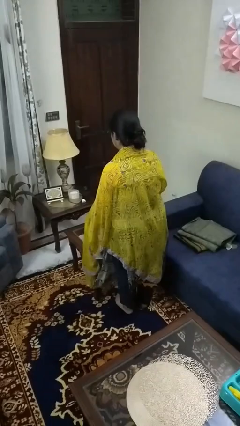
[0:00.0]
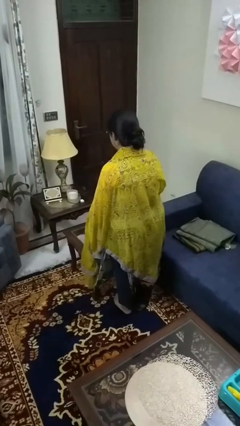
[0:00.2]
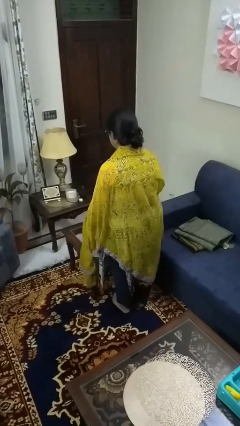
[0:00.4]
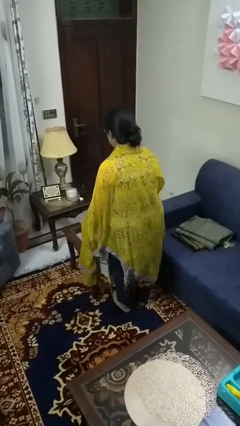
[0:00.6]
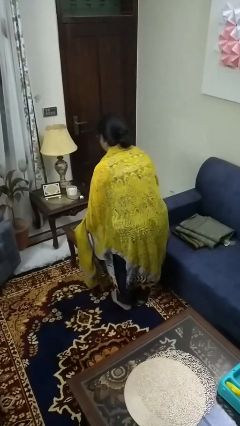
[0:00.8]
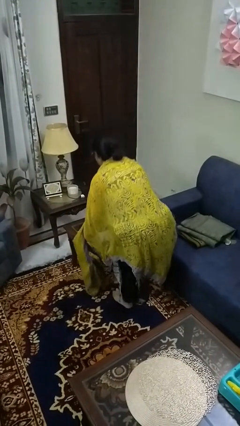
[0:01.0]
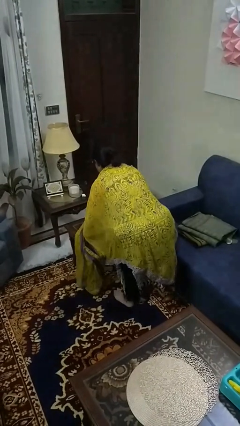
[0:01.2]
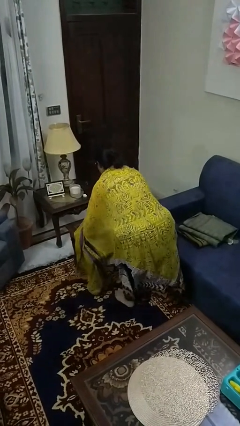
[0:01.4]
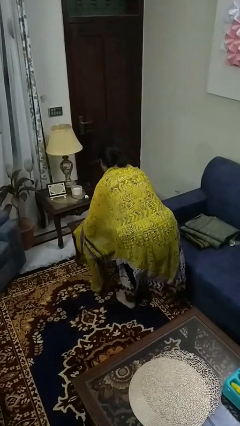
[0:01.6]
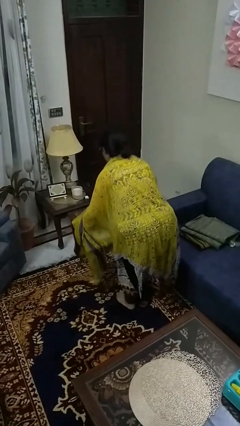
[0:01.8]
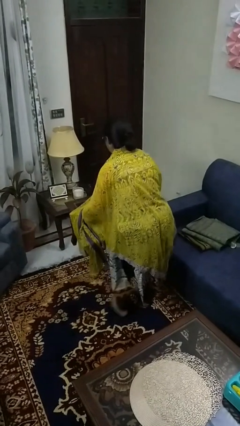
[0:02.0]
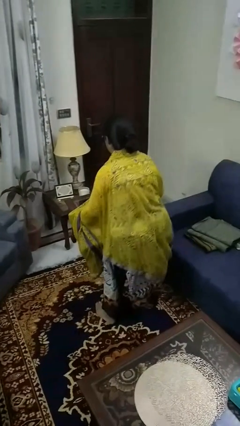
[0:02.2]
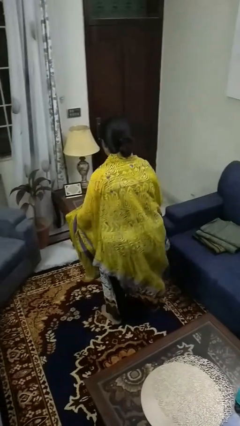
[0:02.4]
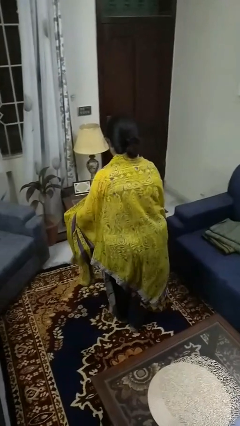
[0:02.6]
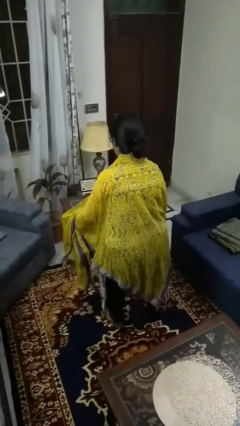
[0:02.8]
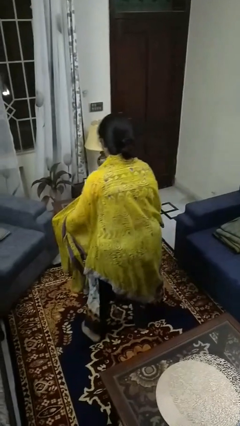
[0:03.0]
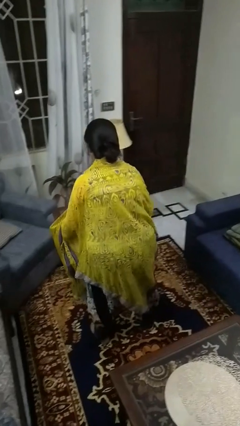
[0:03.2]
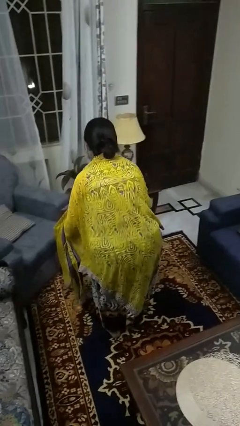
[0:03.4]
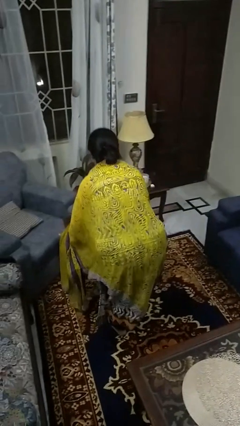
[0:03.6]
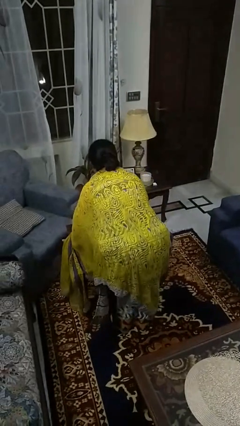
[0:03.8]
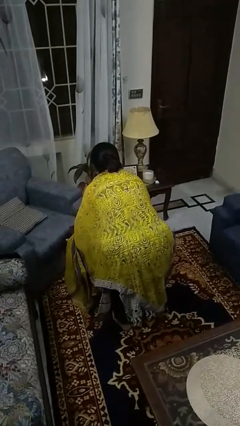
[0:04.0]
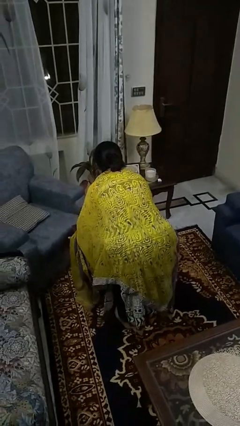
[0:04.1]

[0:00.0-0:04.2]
person carries furniture

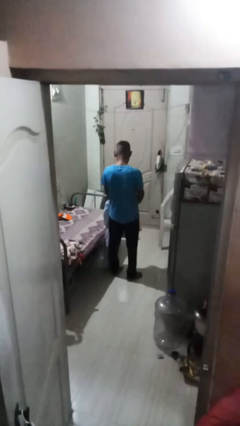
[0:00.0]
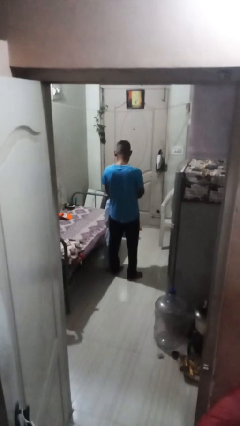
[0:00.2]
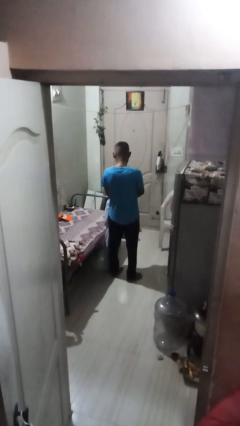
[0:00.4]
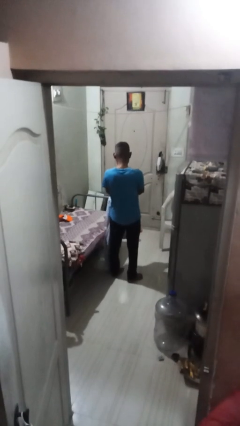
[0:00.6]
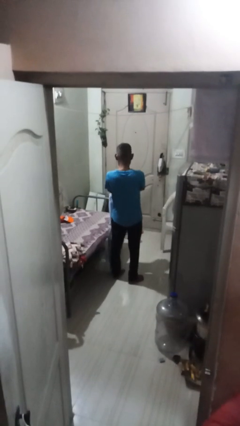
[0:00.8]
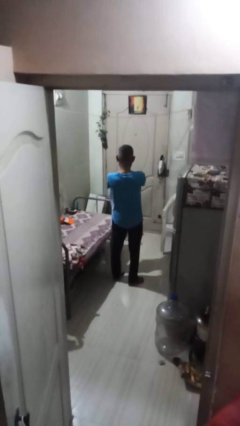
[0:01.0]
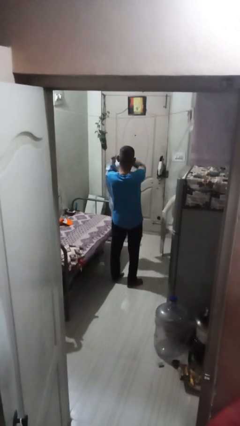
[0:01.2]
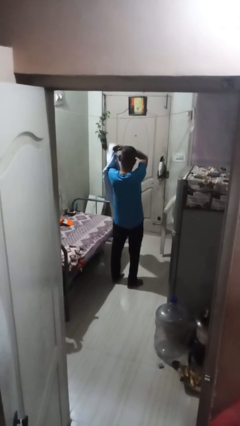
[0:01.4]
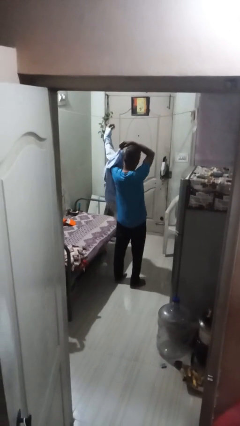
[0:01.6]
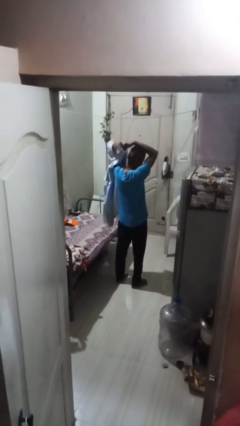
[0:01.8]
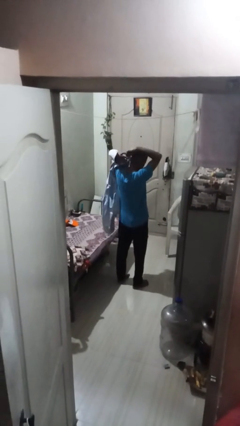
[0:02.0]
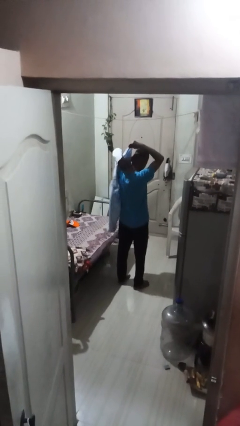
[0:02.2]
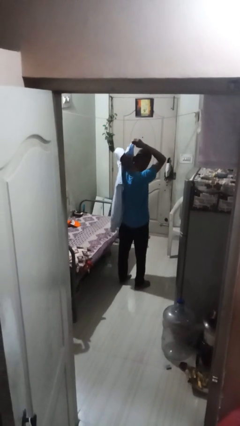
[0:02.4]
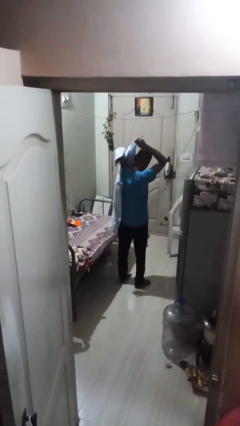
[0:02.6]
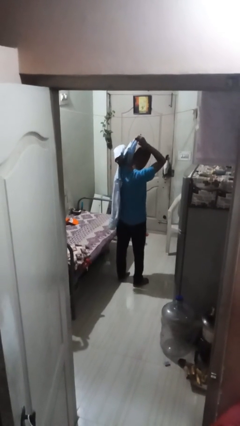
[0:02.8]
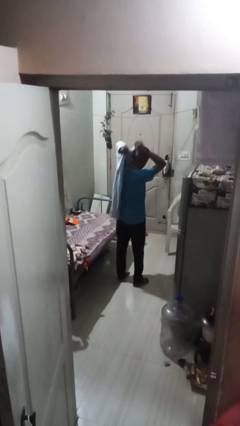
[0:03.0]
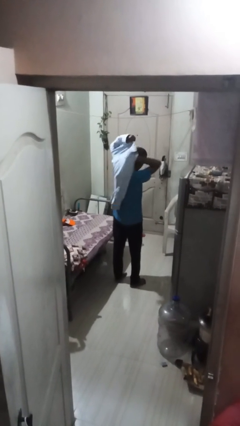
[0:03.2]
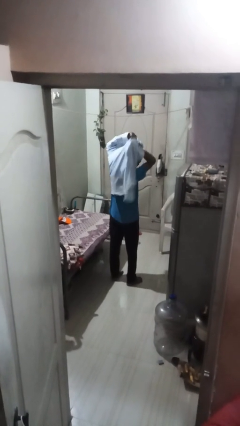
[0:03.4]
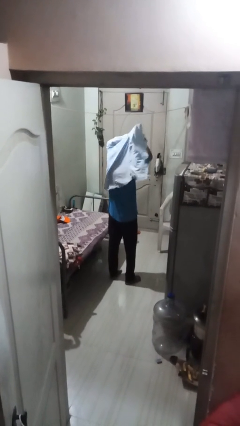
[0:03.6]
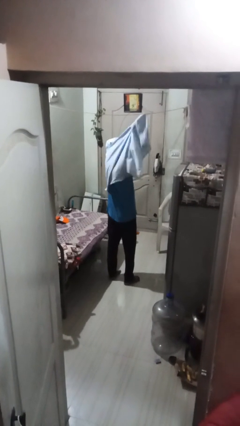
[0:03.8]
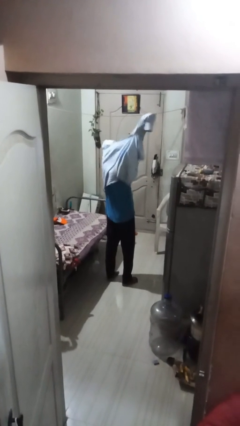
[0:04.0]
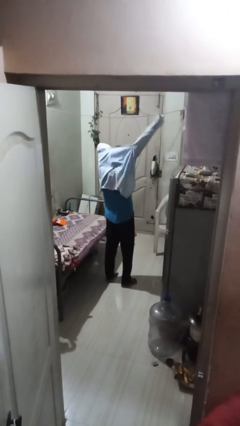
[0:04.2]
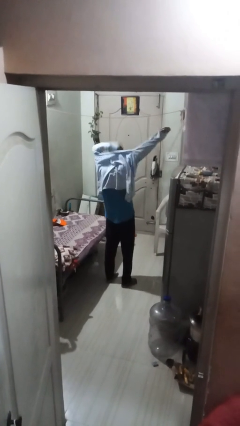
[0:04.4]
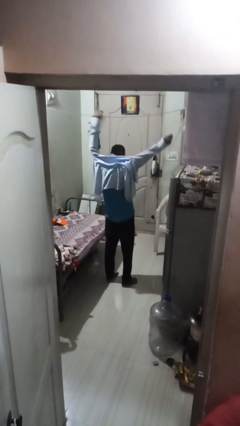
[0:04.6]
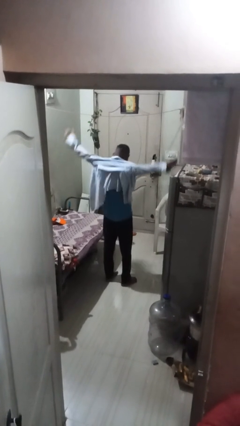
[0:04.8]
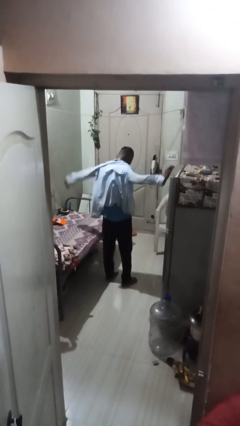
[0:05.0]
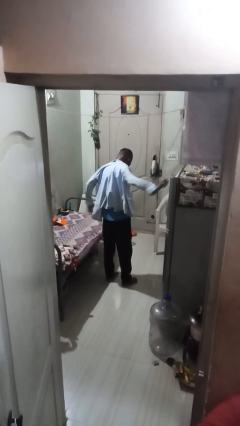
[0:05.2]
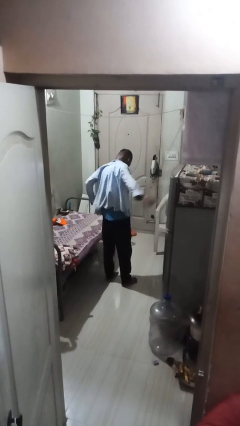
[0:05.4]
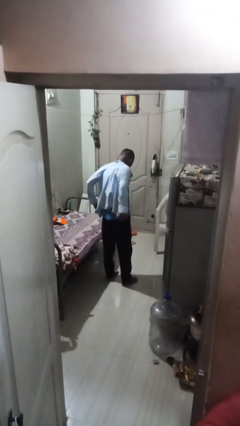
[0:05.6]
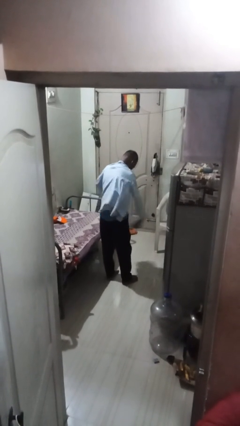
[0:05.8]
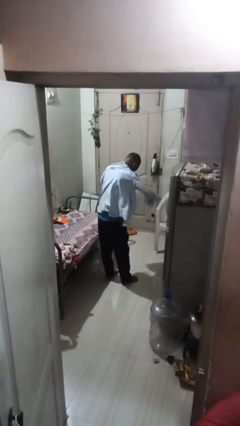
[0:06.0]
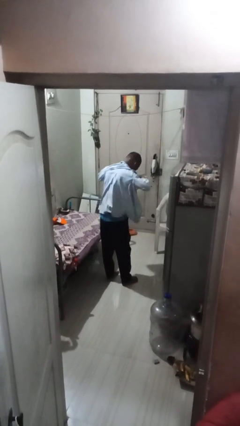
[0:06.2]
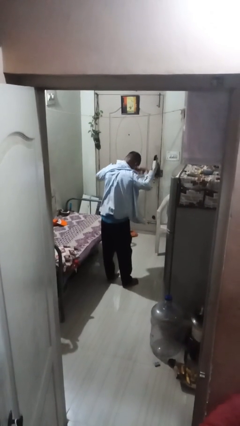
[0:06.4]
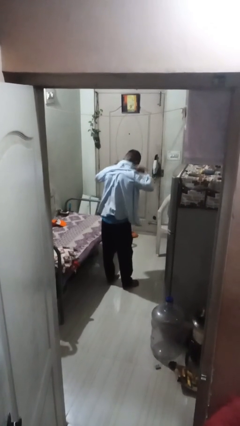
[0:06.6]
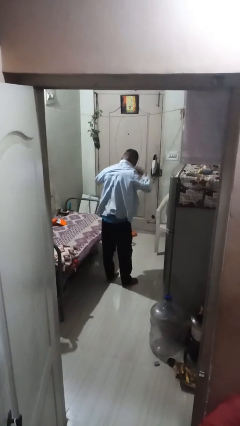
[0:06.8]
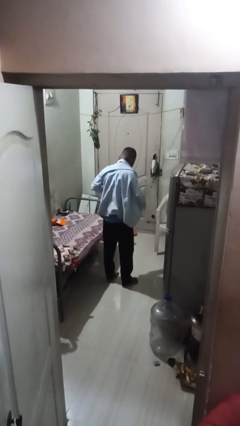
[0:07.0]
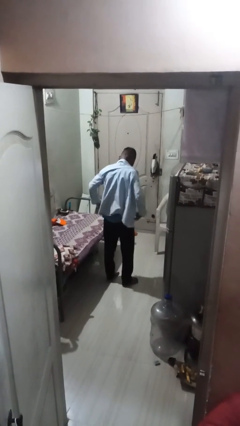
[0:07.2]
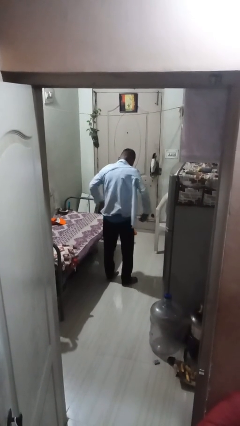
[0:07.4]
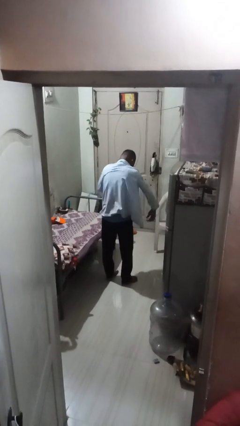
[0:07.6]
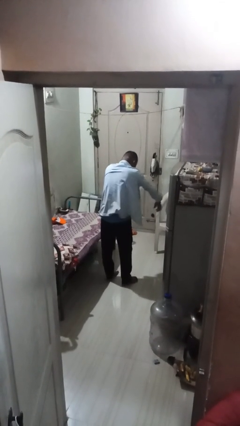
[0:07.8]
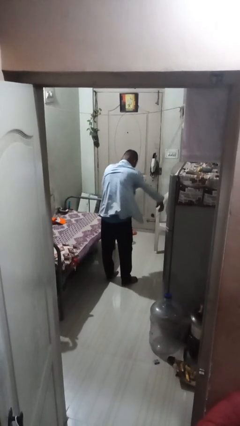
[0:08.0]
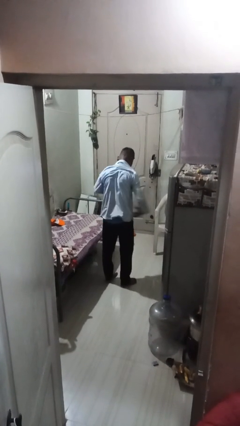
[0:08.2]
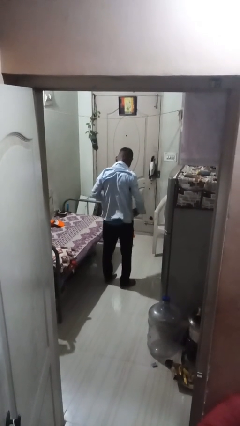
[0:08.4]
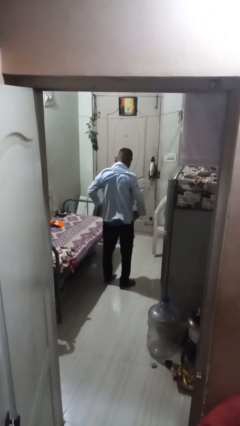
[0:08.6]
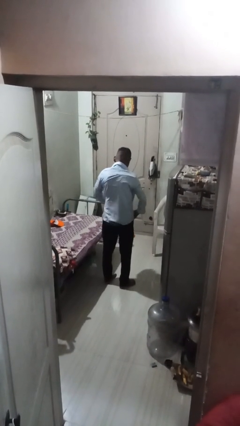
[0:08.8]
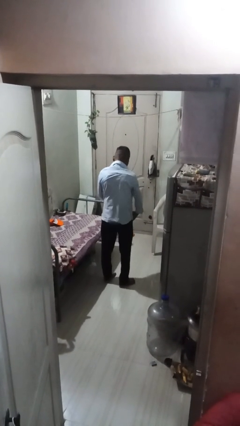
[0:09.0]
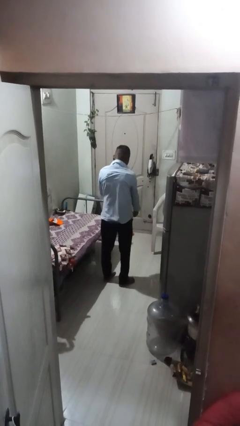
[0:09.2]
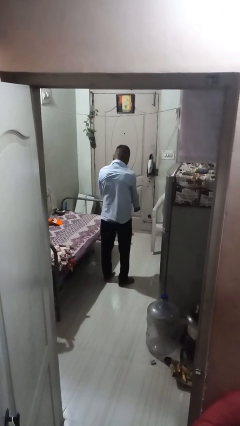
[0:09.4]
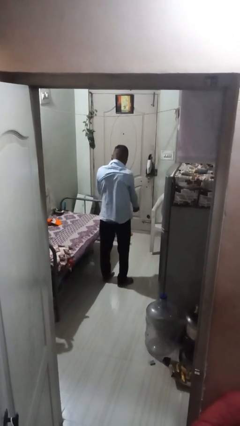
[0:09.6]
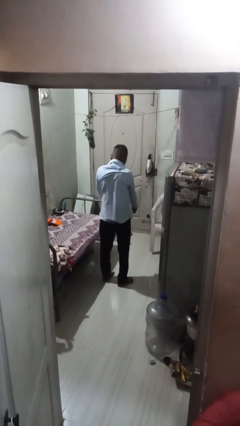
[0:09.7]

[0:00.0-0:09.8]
person puts on shirt

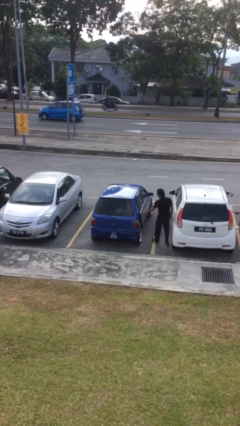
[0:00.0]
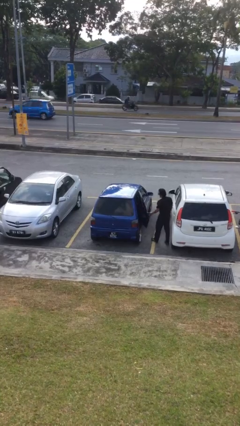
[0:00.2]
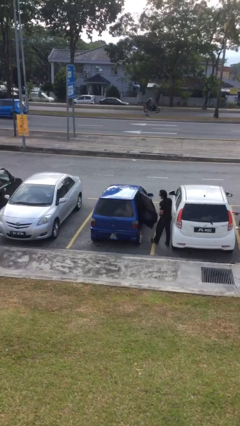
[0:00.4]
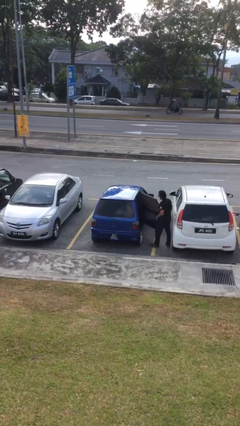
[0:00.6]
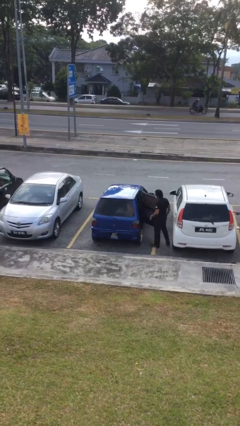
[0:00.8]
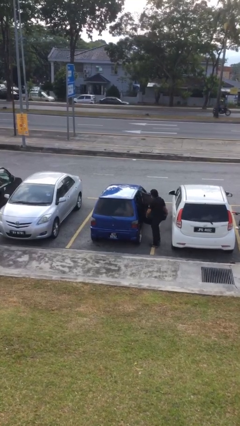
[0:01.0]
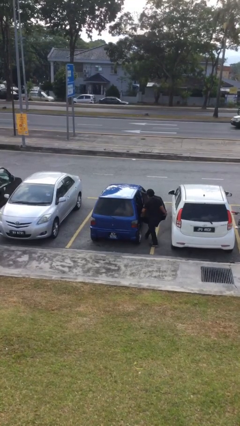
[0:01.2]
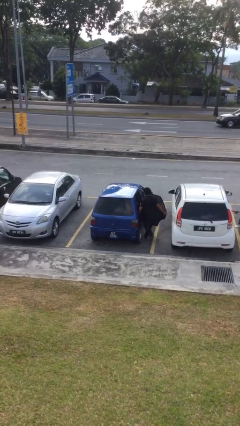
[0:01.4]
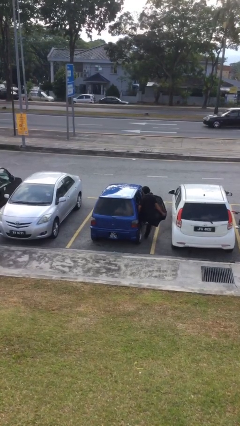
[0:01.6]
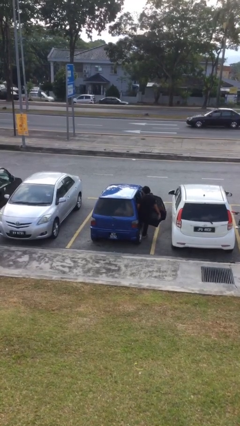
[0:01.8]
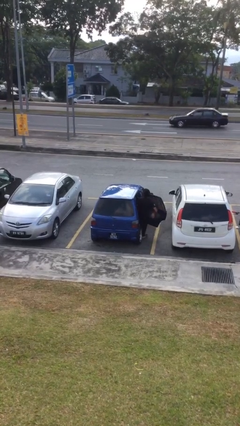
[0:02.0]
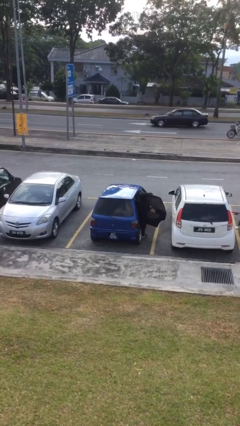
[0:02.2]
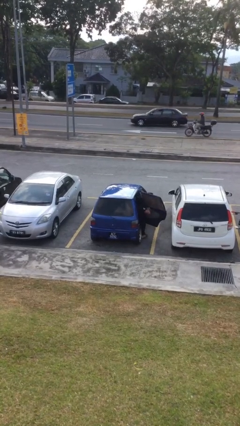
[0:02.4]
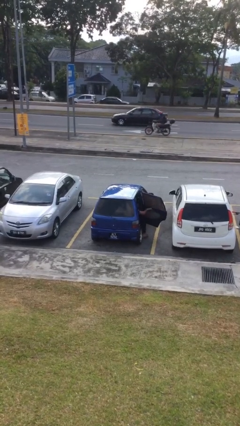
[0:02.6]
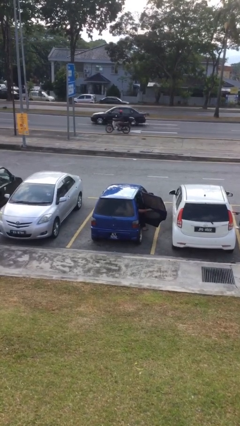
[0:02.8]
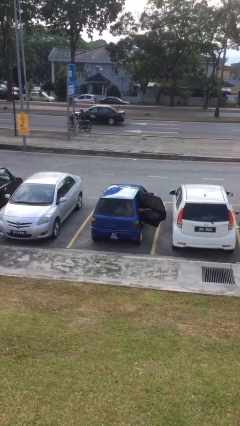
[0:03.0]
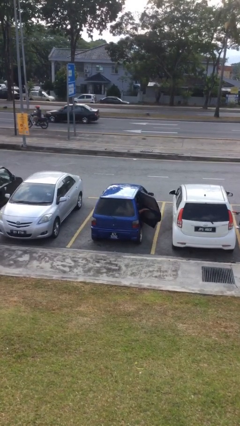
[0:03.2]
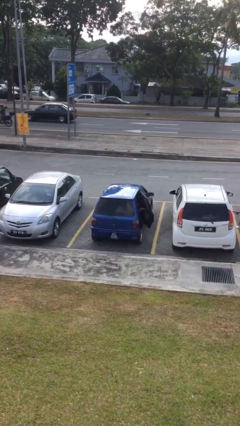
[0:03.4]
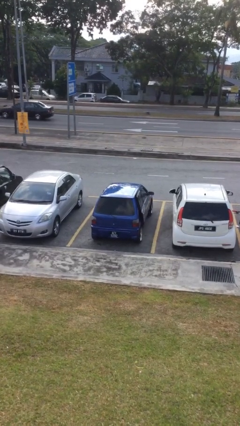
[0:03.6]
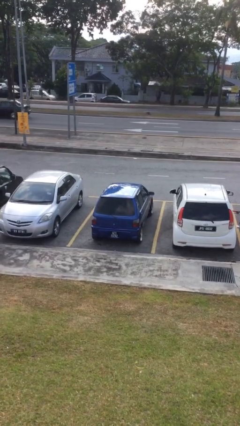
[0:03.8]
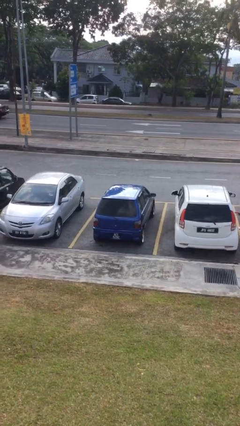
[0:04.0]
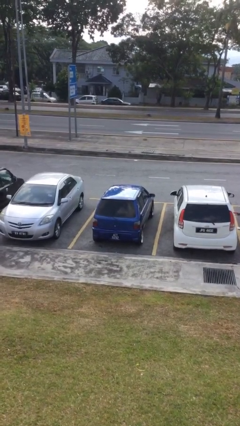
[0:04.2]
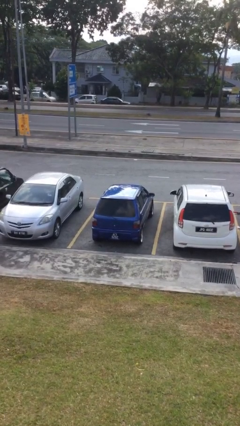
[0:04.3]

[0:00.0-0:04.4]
car picks up person
